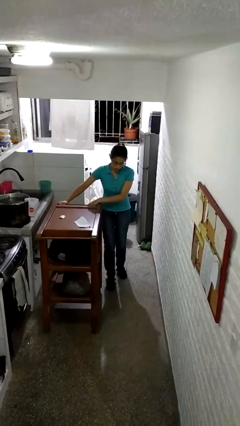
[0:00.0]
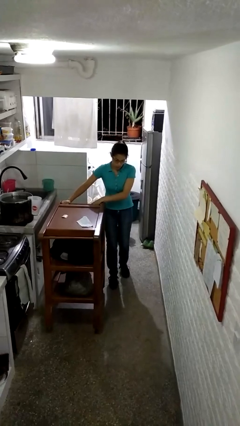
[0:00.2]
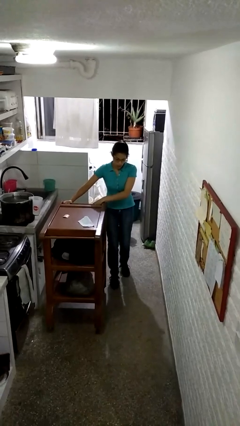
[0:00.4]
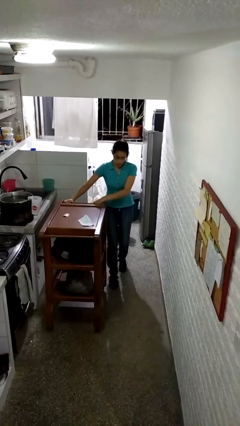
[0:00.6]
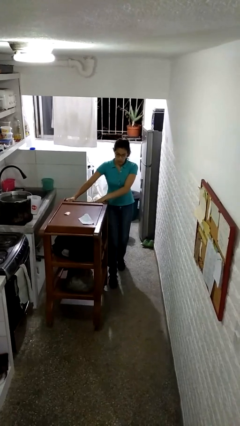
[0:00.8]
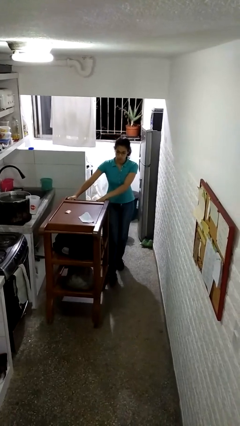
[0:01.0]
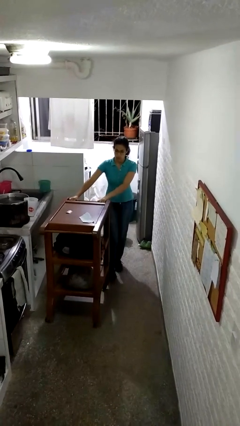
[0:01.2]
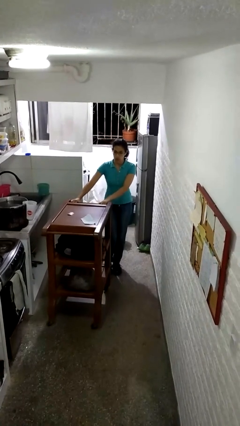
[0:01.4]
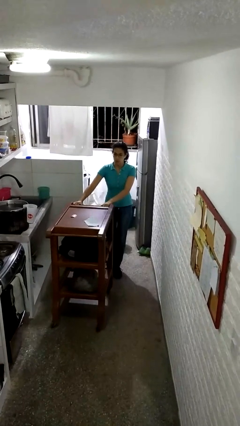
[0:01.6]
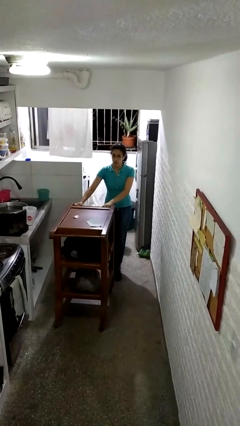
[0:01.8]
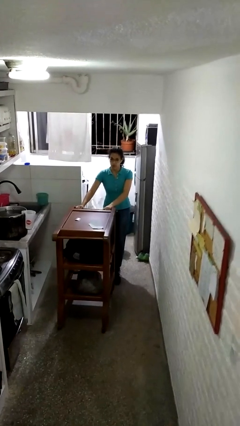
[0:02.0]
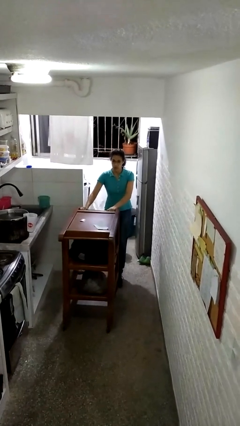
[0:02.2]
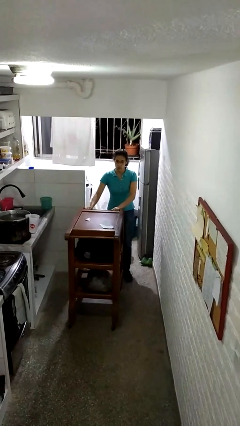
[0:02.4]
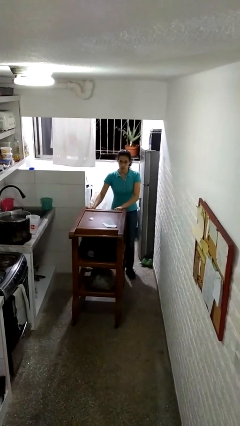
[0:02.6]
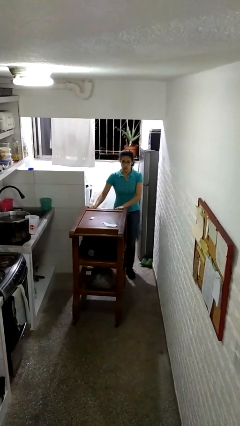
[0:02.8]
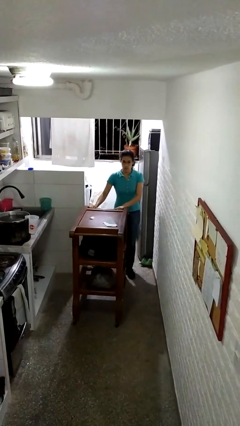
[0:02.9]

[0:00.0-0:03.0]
person pulls wheeled cart

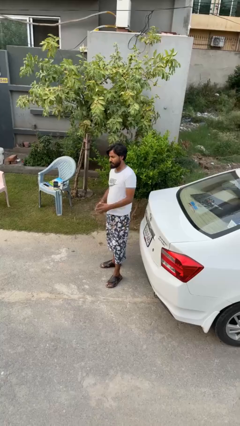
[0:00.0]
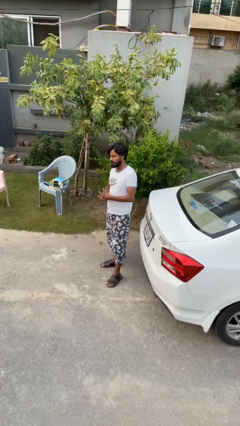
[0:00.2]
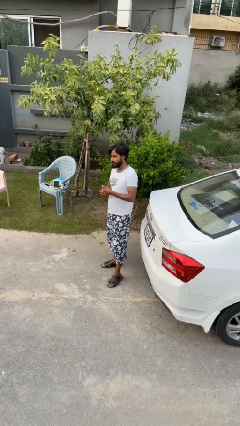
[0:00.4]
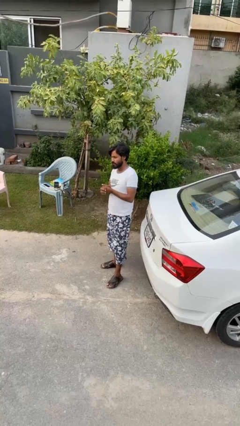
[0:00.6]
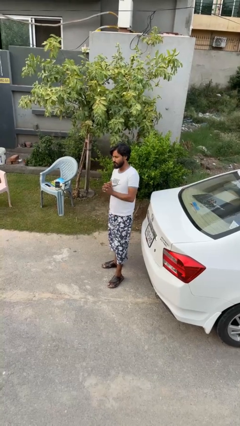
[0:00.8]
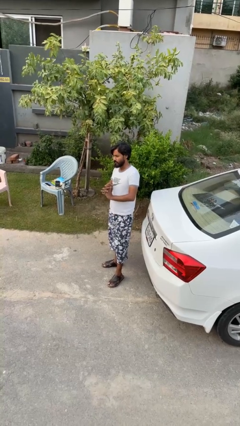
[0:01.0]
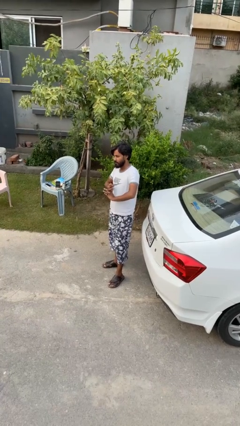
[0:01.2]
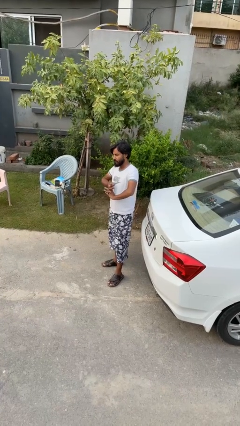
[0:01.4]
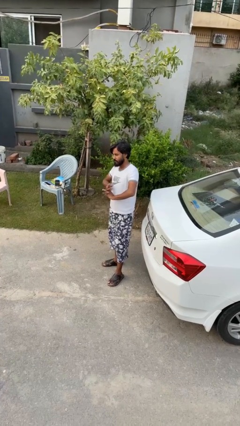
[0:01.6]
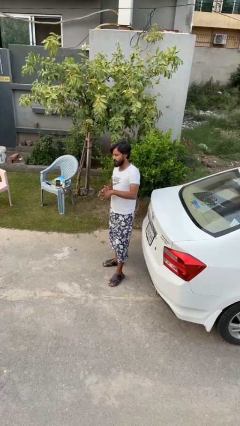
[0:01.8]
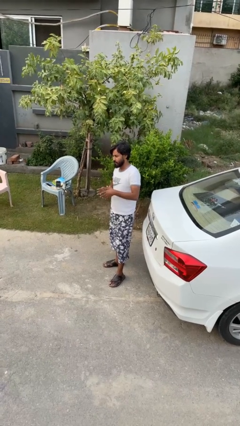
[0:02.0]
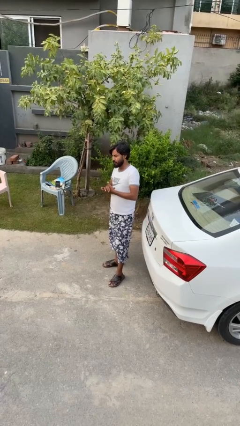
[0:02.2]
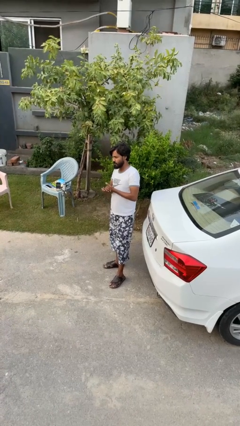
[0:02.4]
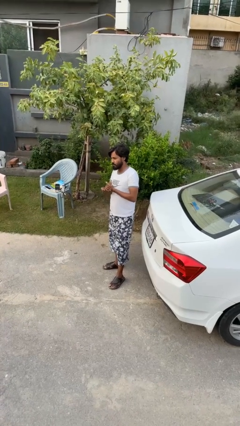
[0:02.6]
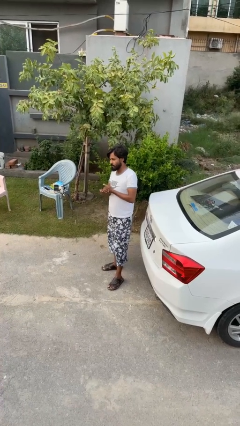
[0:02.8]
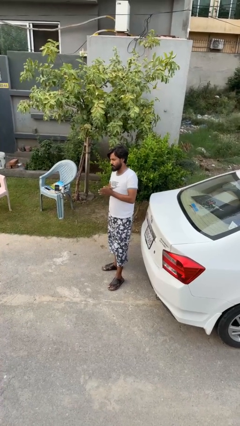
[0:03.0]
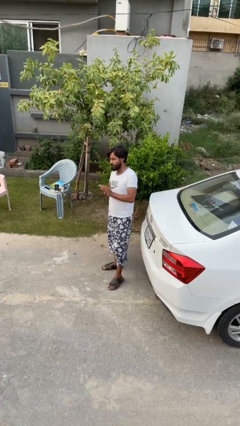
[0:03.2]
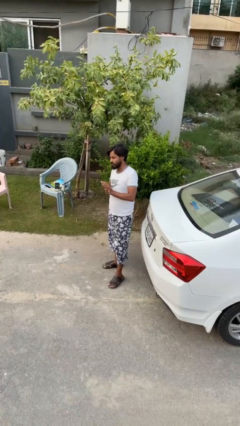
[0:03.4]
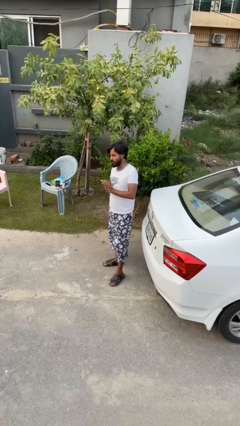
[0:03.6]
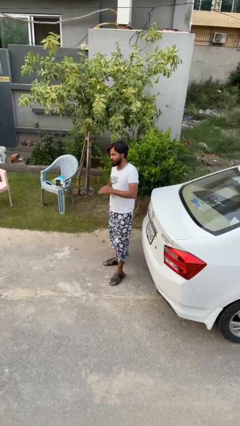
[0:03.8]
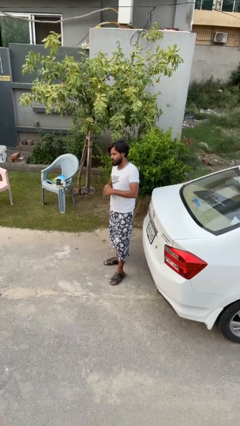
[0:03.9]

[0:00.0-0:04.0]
person cracks knuckles

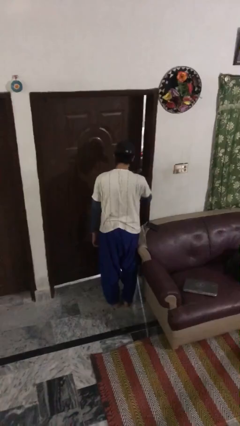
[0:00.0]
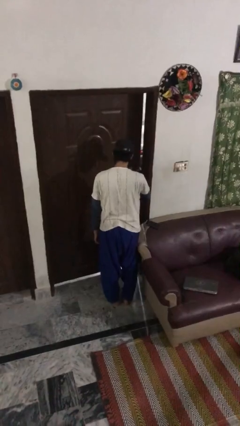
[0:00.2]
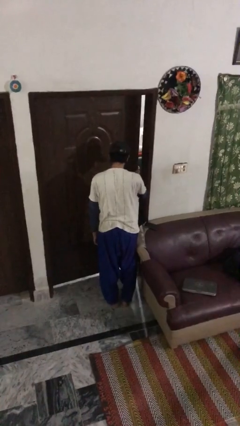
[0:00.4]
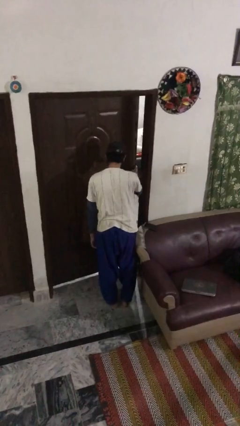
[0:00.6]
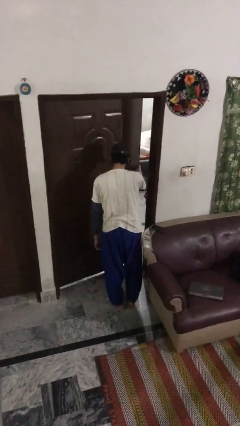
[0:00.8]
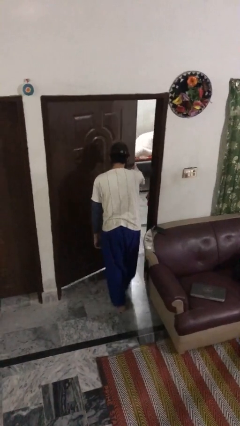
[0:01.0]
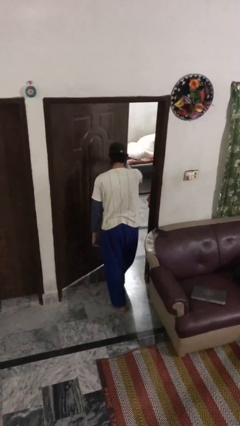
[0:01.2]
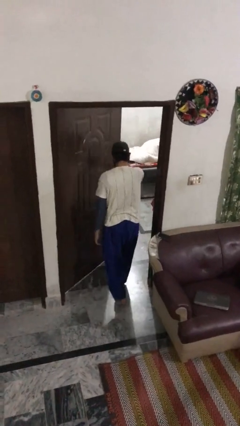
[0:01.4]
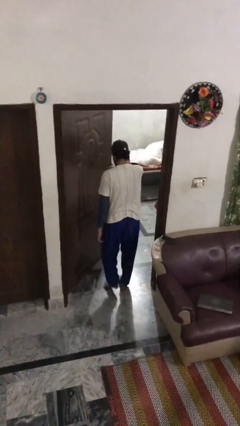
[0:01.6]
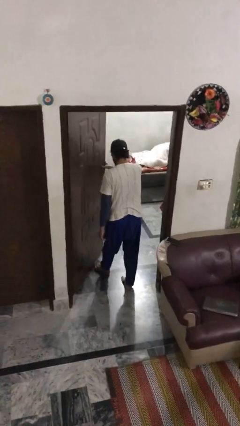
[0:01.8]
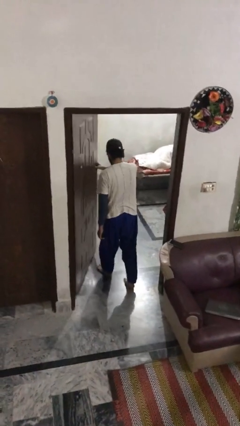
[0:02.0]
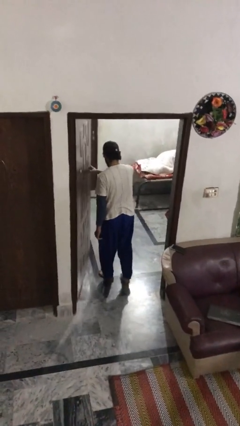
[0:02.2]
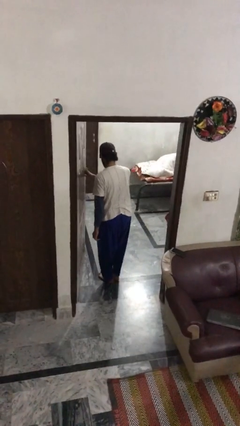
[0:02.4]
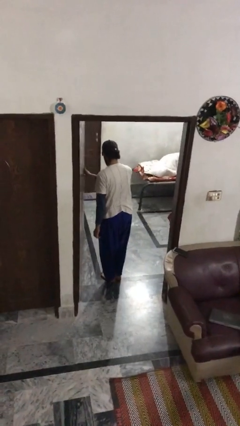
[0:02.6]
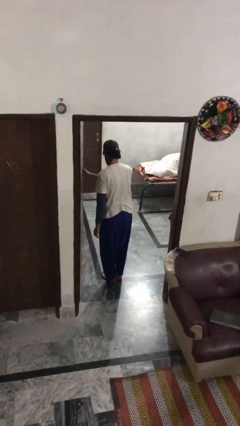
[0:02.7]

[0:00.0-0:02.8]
person opens facility door

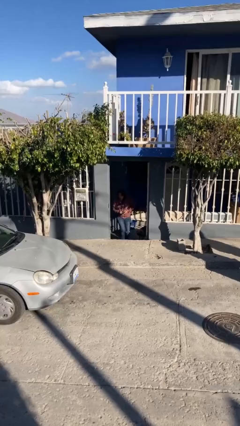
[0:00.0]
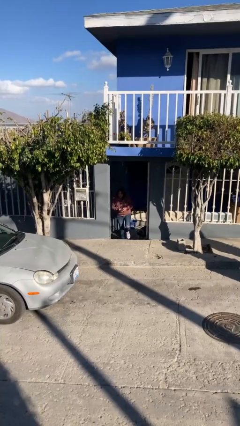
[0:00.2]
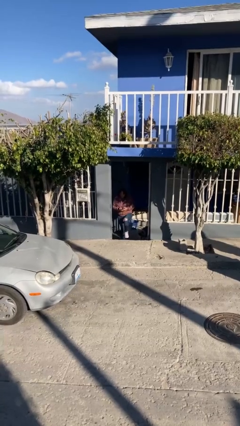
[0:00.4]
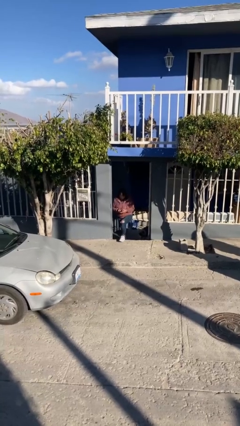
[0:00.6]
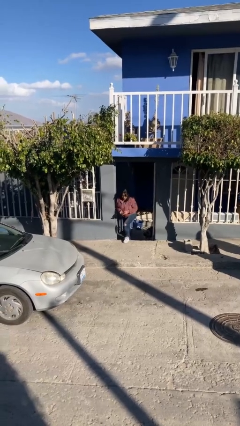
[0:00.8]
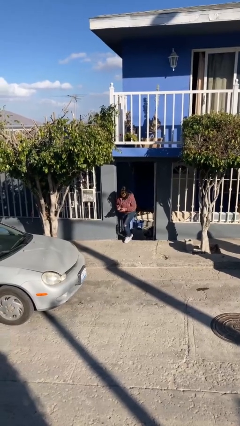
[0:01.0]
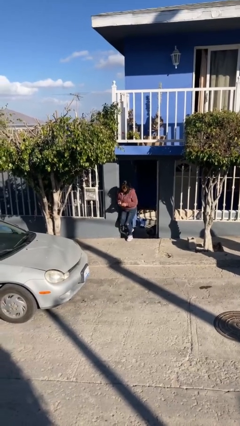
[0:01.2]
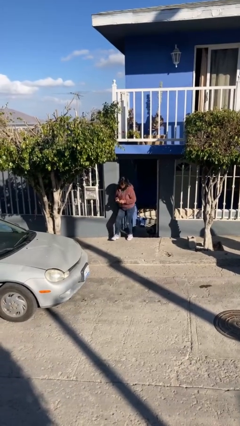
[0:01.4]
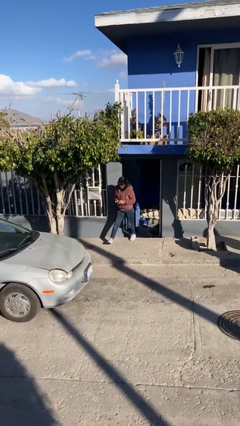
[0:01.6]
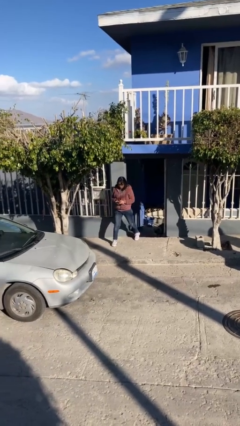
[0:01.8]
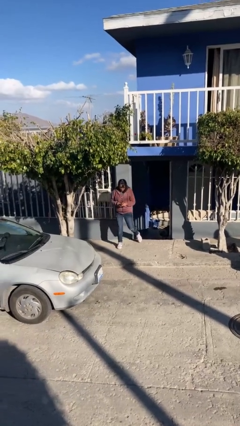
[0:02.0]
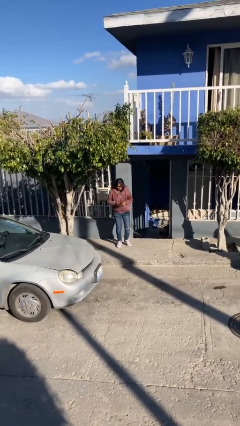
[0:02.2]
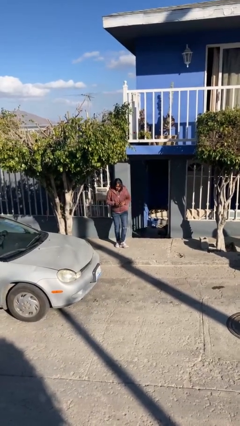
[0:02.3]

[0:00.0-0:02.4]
person enters scene through structure

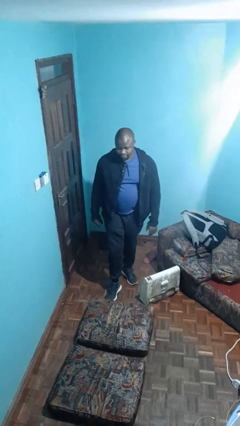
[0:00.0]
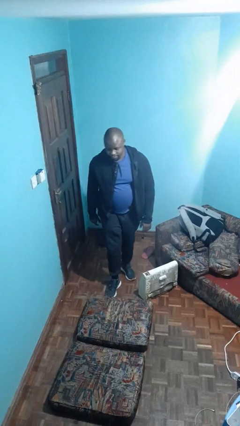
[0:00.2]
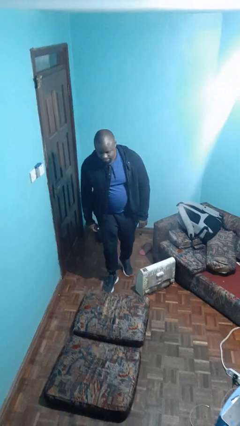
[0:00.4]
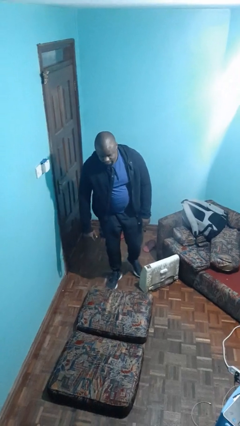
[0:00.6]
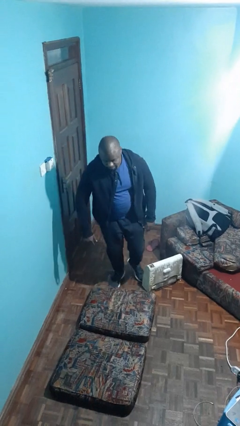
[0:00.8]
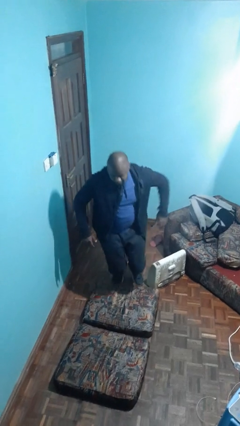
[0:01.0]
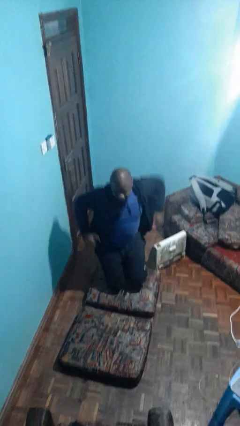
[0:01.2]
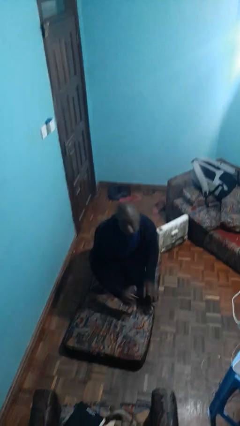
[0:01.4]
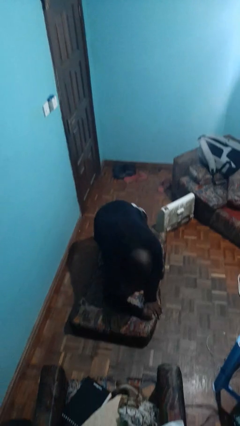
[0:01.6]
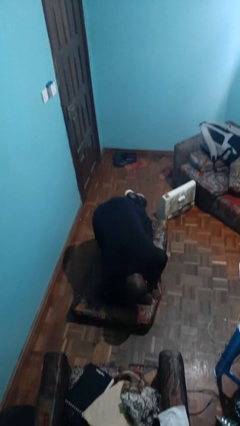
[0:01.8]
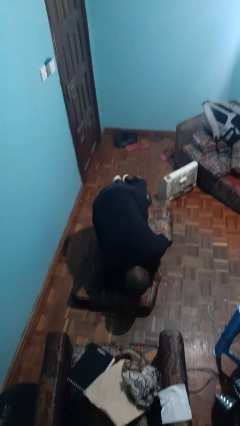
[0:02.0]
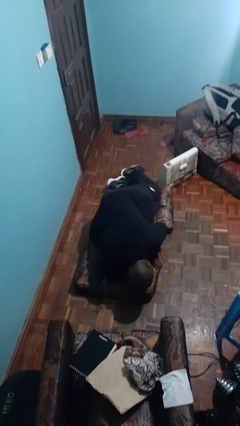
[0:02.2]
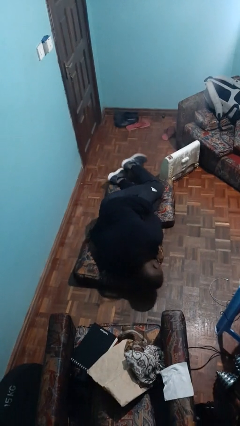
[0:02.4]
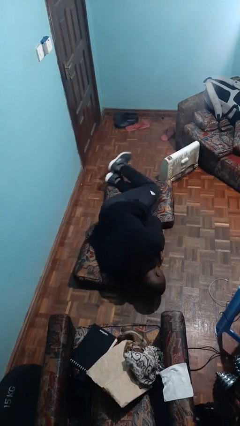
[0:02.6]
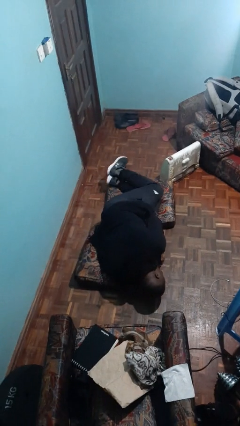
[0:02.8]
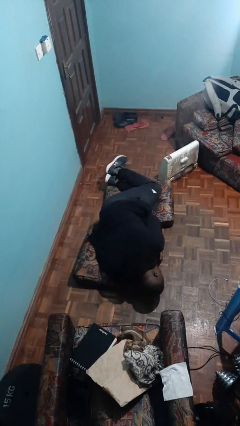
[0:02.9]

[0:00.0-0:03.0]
person trips on object on floor

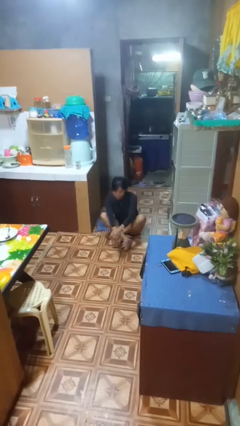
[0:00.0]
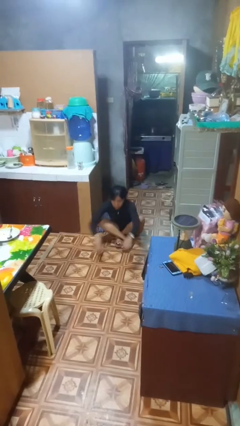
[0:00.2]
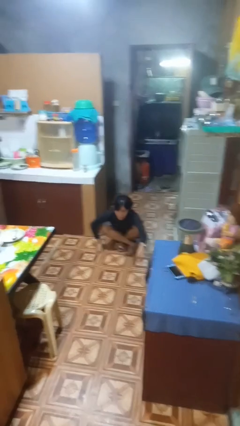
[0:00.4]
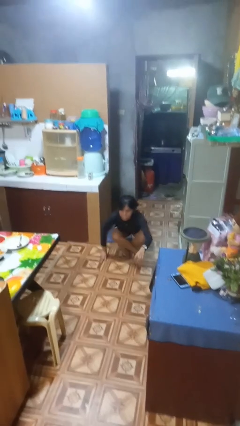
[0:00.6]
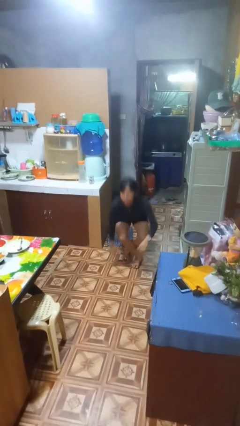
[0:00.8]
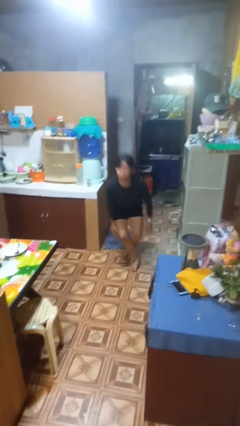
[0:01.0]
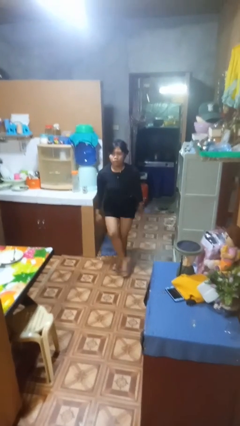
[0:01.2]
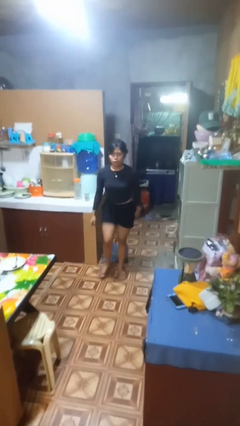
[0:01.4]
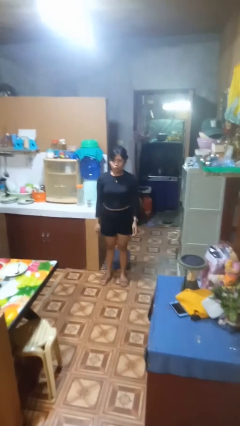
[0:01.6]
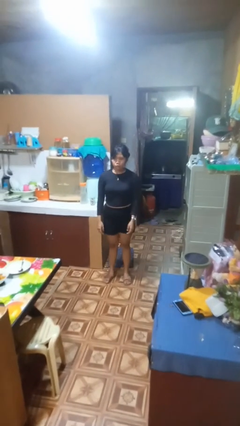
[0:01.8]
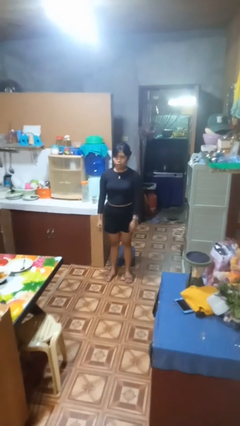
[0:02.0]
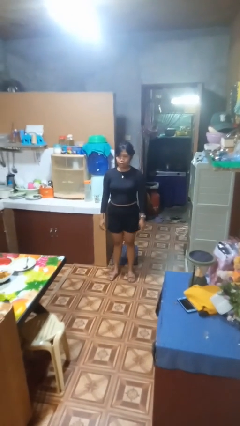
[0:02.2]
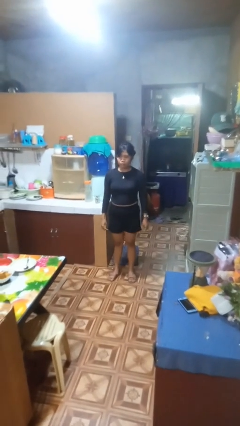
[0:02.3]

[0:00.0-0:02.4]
person stands up from floor
